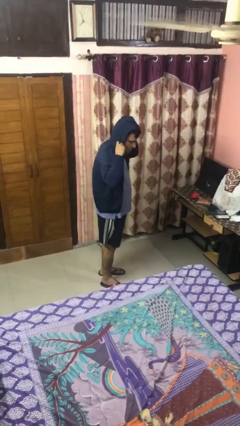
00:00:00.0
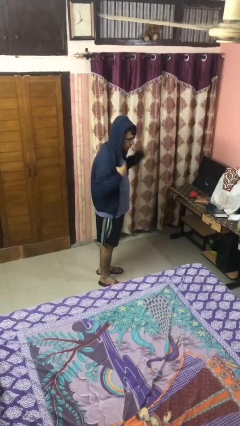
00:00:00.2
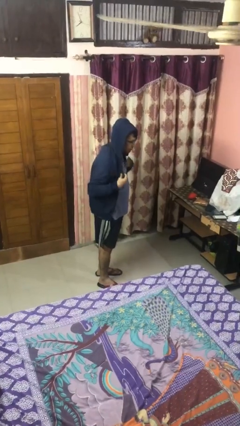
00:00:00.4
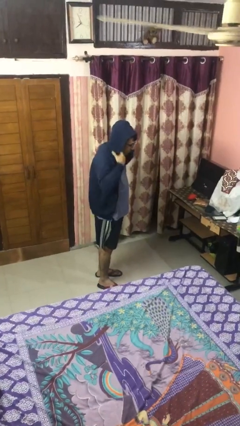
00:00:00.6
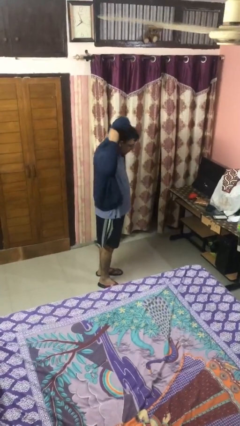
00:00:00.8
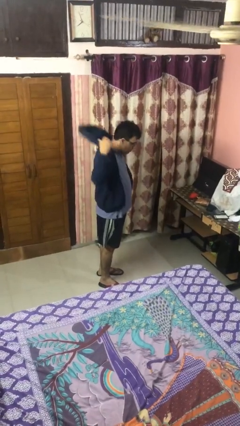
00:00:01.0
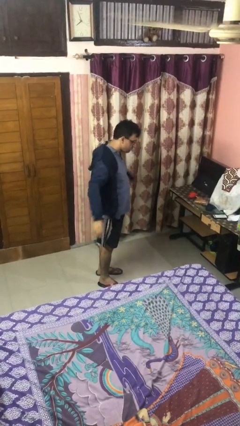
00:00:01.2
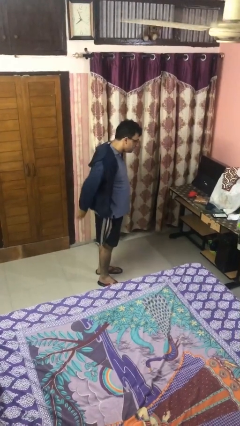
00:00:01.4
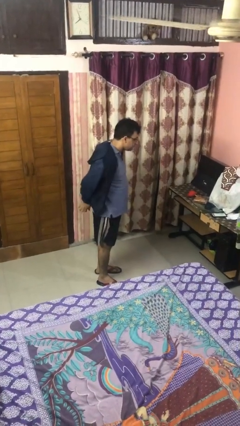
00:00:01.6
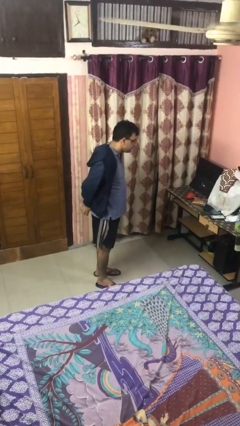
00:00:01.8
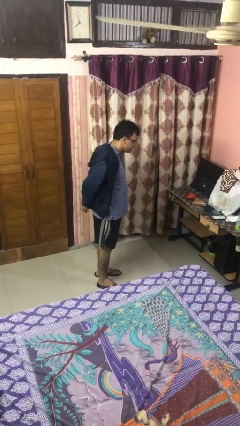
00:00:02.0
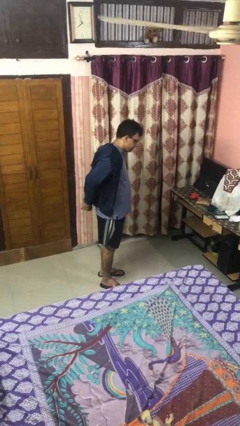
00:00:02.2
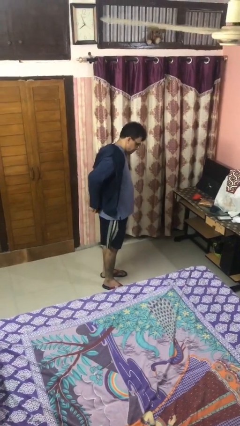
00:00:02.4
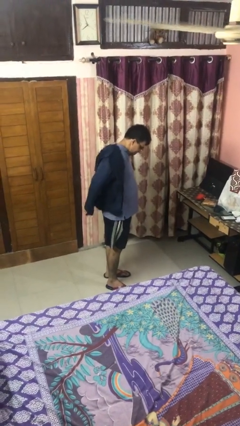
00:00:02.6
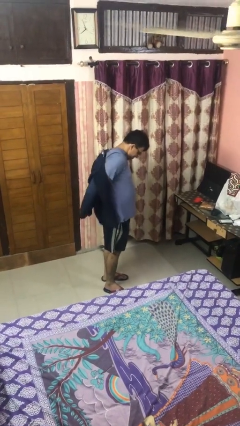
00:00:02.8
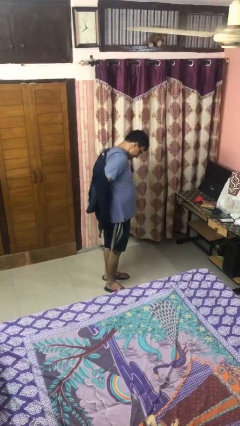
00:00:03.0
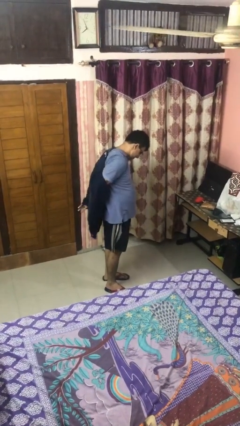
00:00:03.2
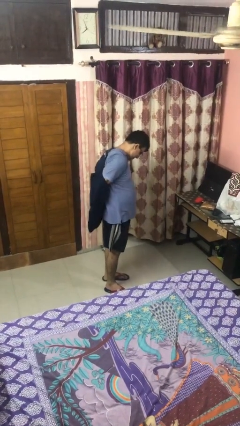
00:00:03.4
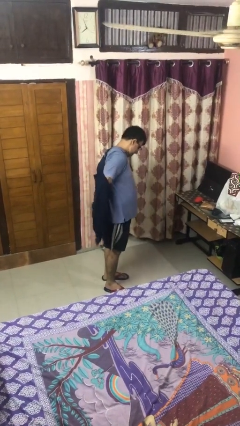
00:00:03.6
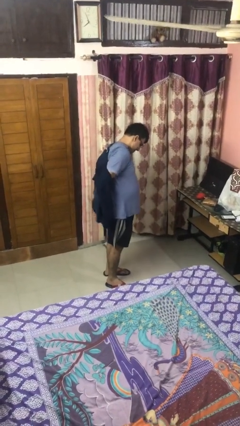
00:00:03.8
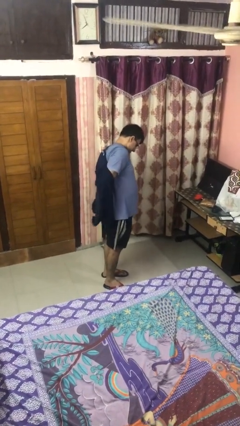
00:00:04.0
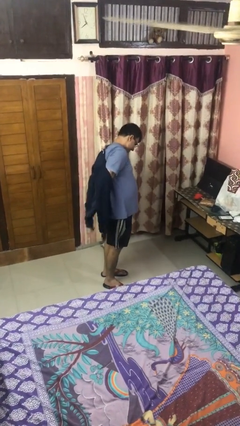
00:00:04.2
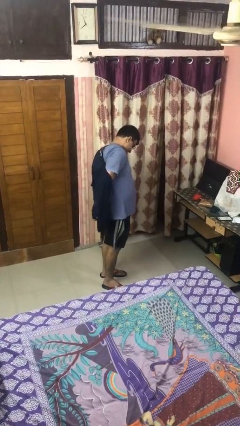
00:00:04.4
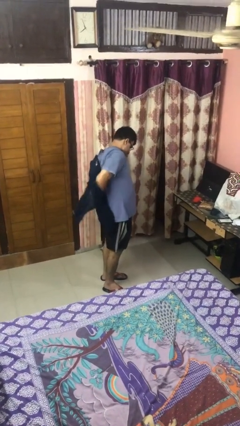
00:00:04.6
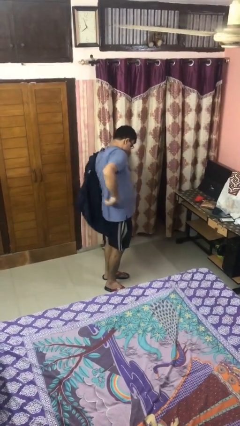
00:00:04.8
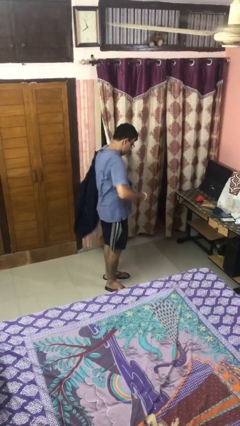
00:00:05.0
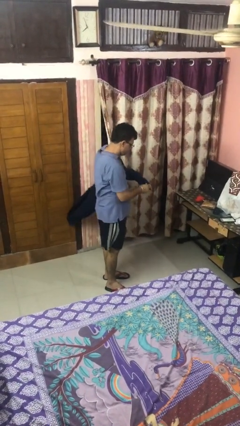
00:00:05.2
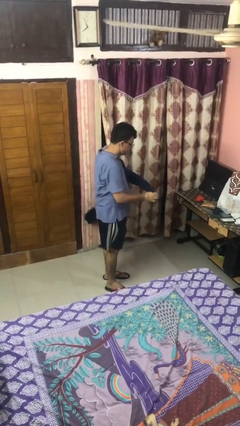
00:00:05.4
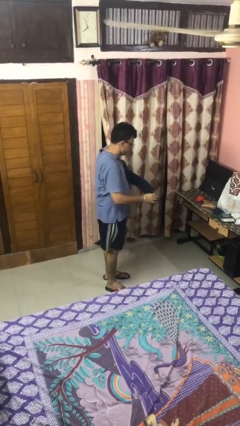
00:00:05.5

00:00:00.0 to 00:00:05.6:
person takes off hoodie

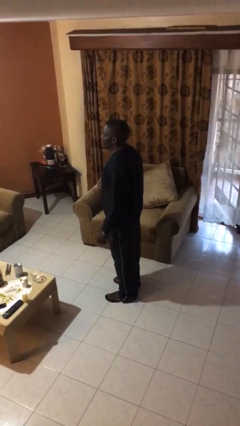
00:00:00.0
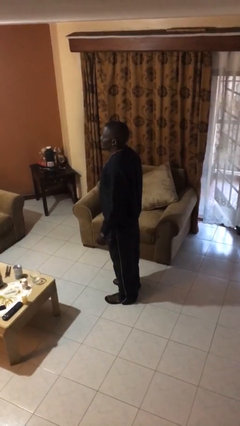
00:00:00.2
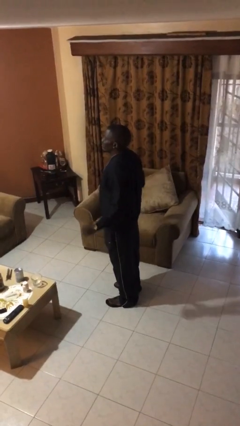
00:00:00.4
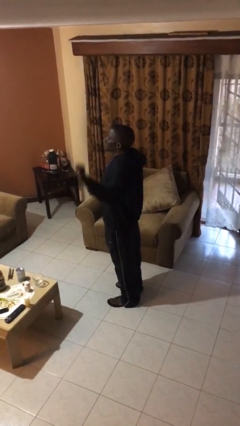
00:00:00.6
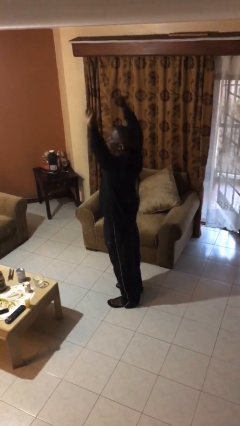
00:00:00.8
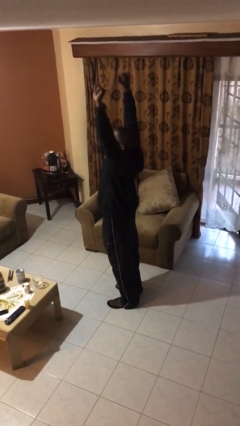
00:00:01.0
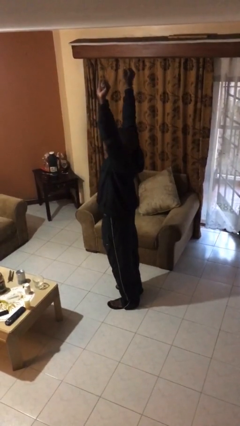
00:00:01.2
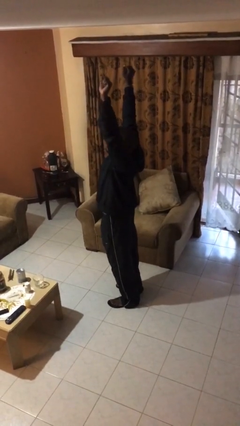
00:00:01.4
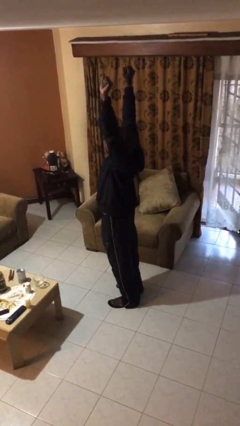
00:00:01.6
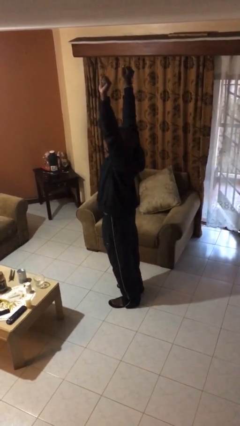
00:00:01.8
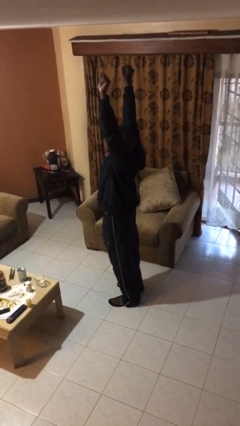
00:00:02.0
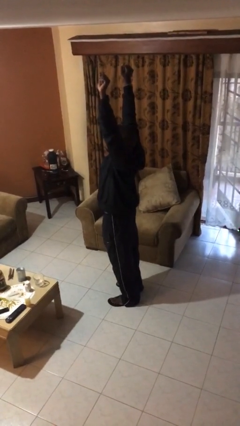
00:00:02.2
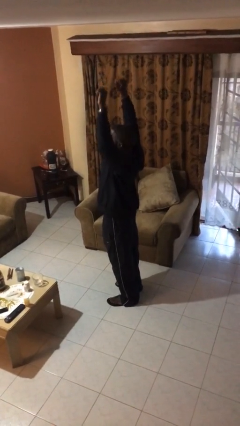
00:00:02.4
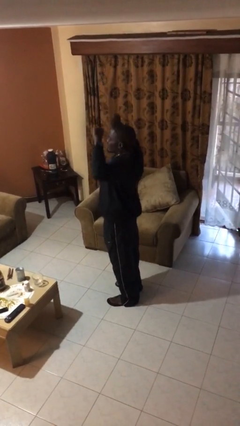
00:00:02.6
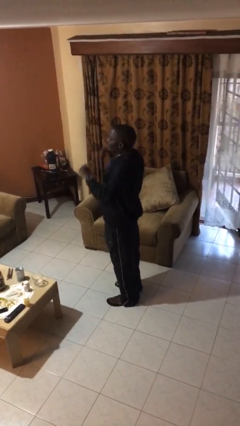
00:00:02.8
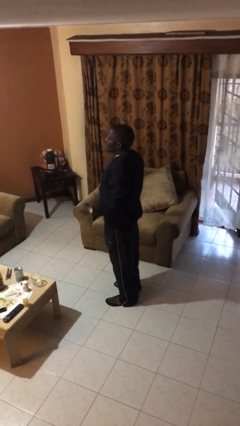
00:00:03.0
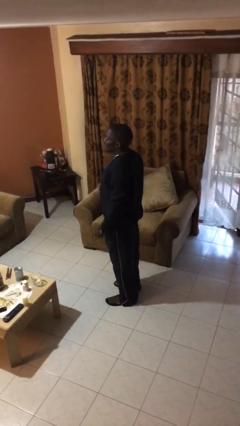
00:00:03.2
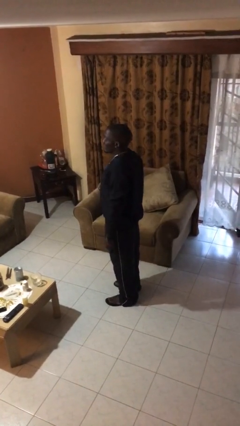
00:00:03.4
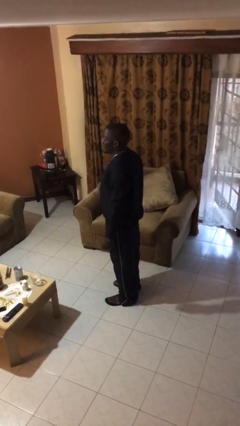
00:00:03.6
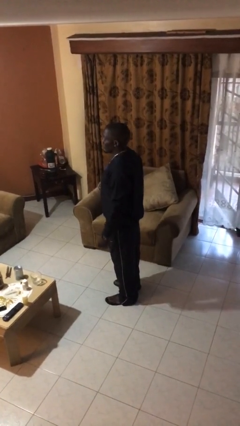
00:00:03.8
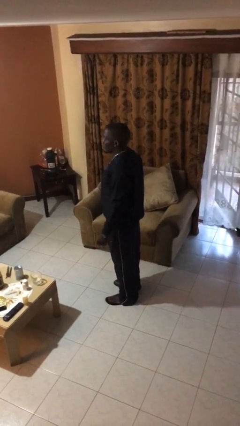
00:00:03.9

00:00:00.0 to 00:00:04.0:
person stretches arms over head

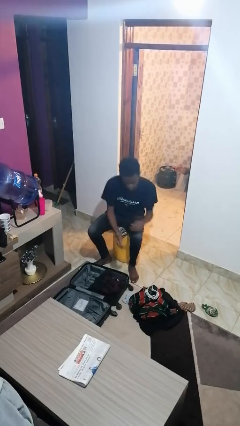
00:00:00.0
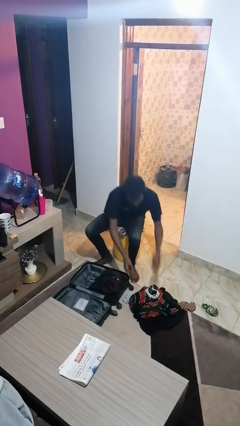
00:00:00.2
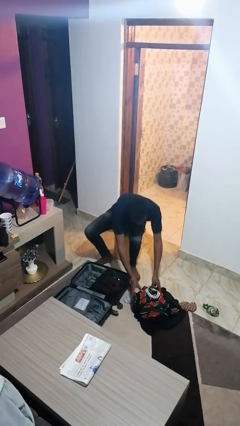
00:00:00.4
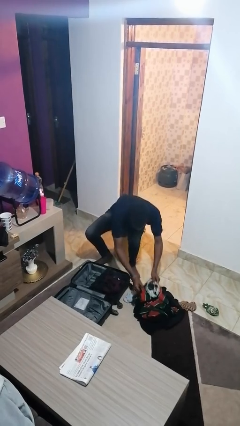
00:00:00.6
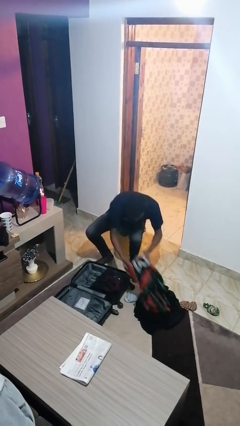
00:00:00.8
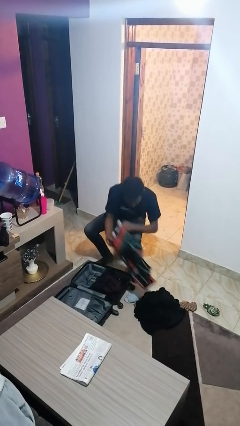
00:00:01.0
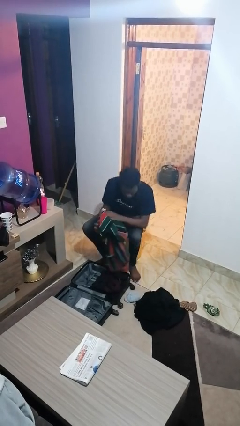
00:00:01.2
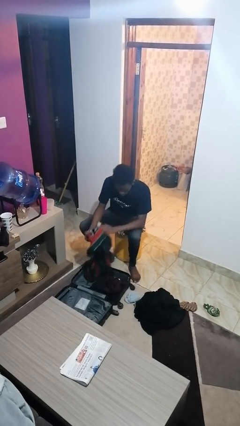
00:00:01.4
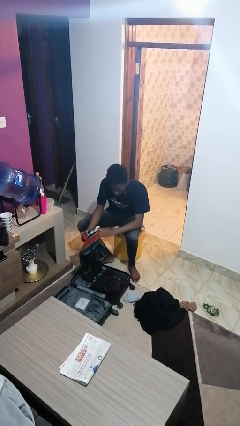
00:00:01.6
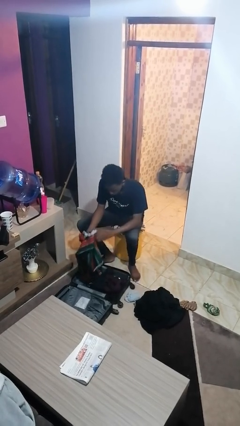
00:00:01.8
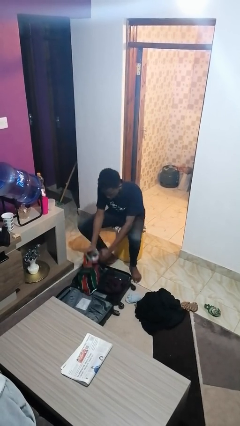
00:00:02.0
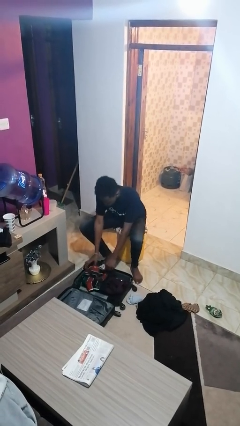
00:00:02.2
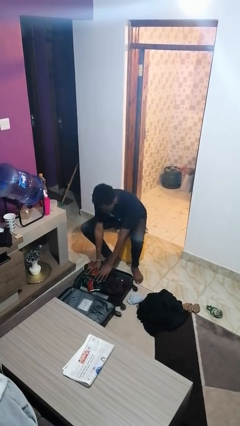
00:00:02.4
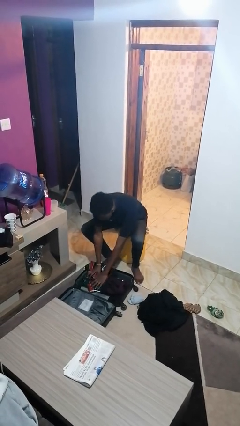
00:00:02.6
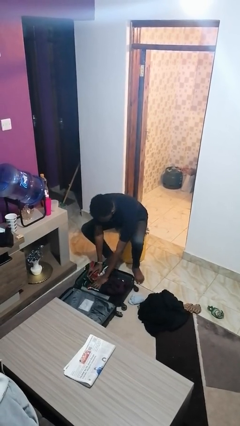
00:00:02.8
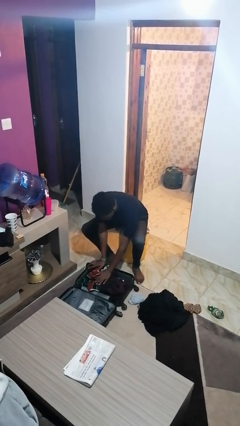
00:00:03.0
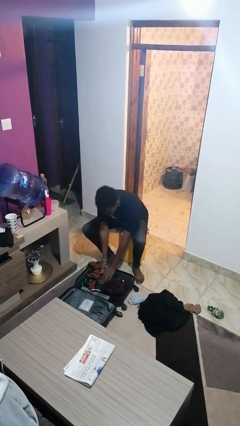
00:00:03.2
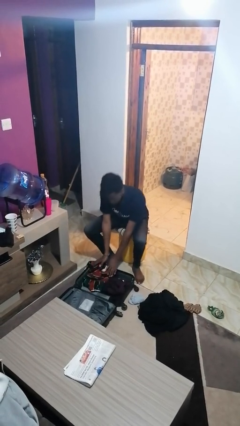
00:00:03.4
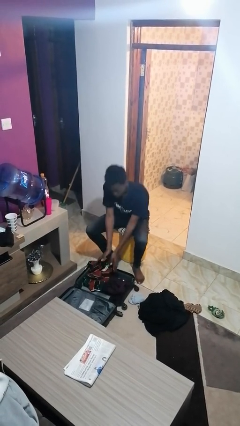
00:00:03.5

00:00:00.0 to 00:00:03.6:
person loads clothes into suitcase

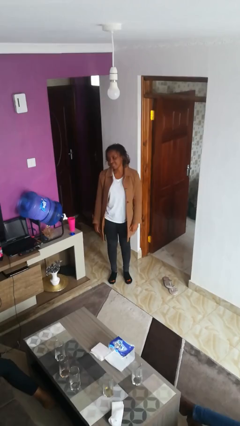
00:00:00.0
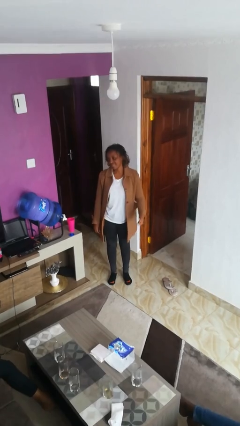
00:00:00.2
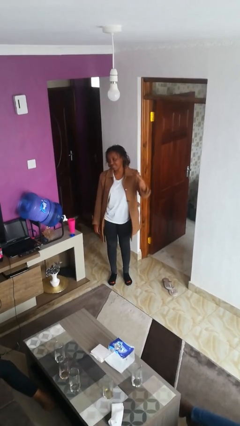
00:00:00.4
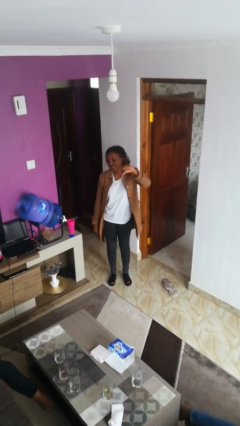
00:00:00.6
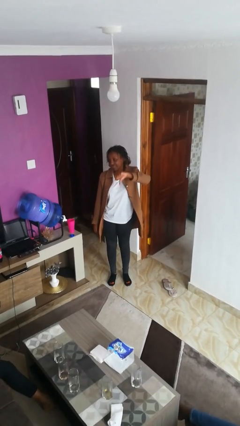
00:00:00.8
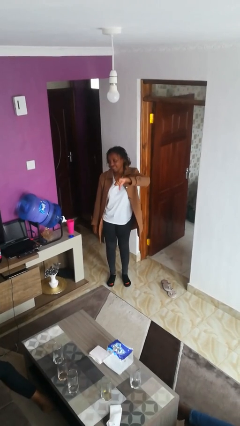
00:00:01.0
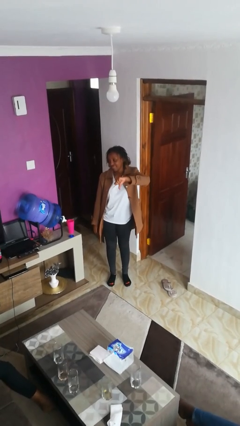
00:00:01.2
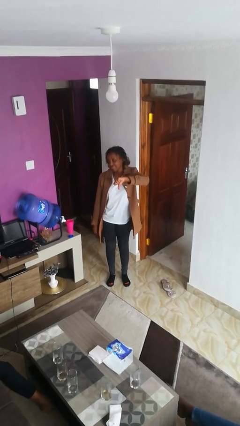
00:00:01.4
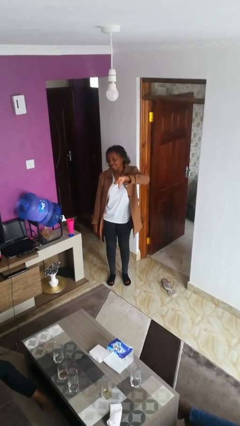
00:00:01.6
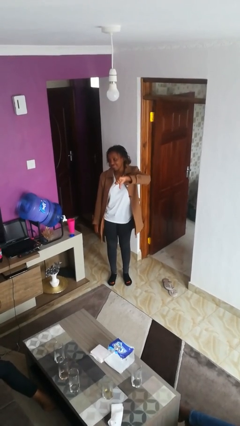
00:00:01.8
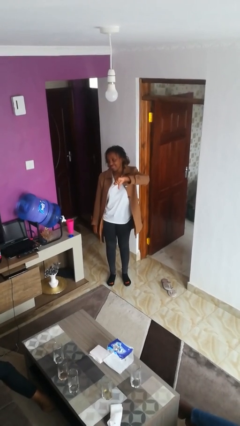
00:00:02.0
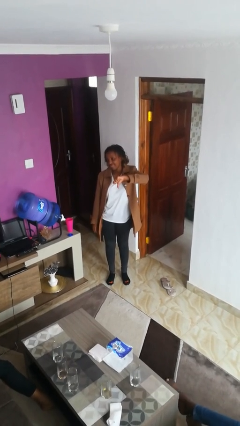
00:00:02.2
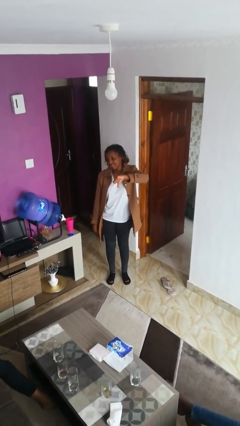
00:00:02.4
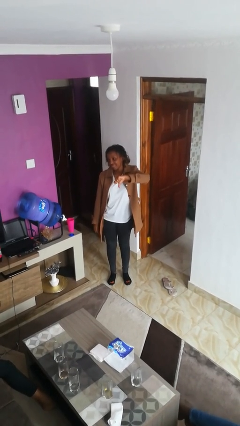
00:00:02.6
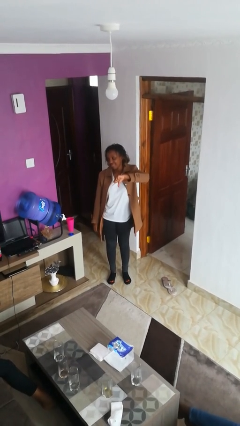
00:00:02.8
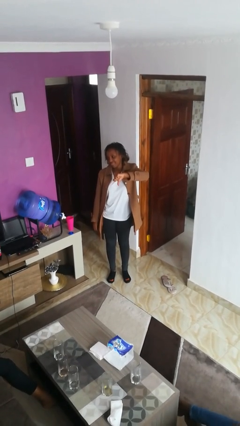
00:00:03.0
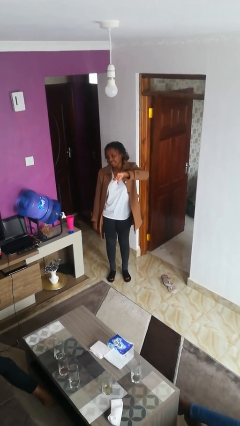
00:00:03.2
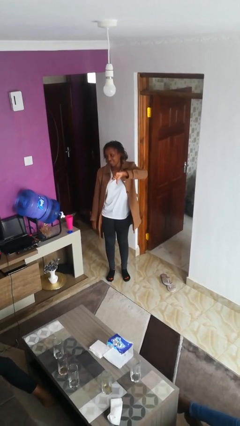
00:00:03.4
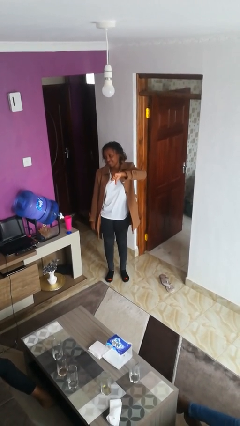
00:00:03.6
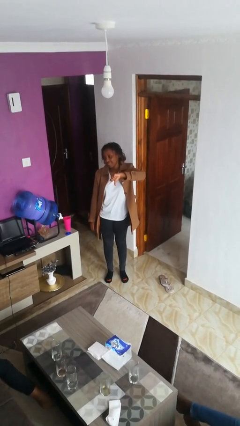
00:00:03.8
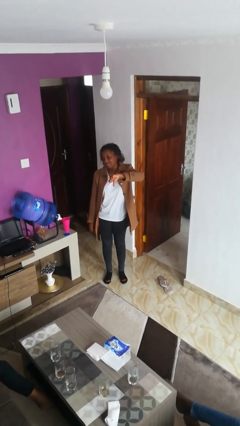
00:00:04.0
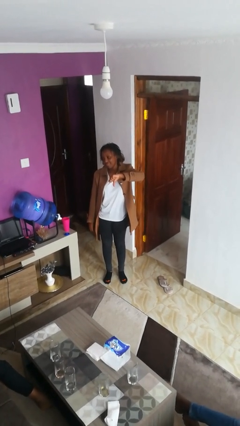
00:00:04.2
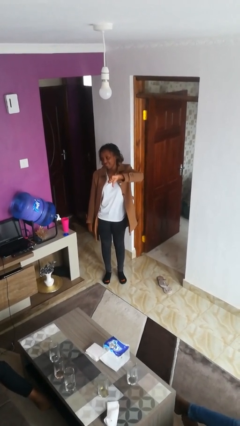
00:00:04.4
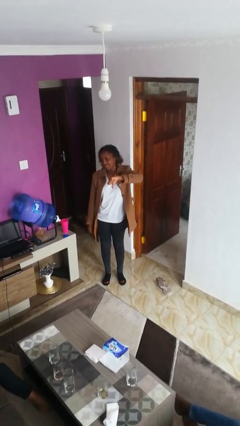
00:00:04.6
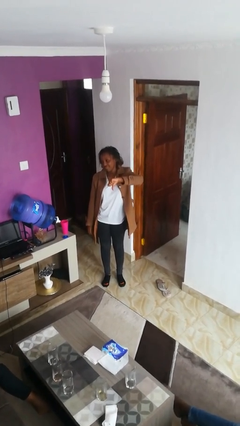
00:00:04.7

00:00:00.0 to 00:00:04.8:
person gestures thumbs down
